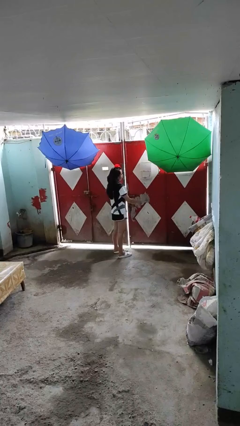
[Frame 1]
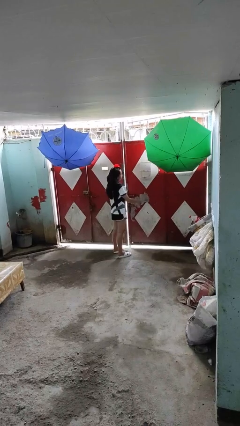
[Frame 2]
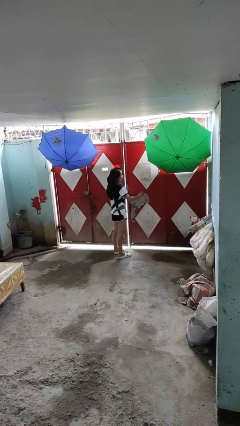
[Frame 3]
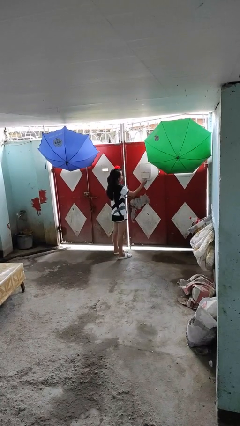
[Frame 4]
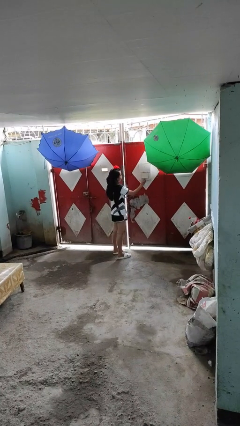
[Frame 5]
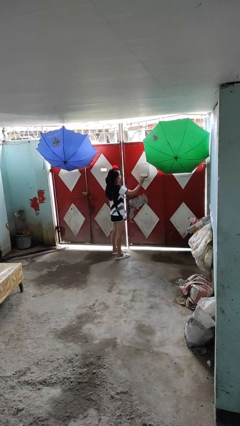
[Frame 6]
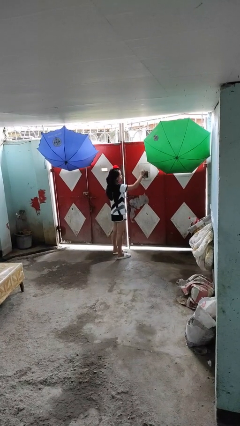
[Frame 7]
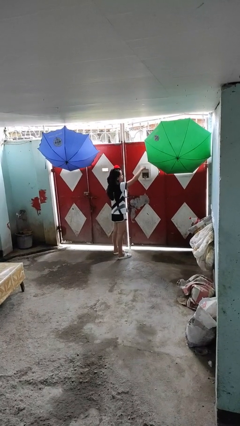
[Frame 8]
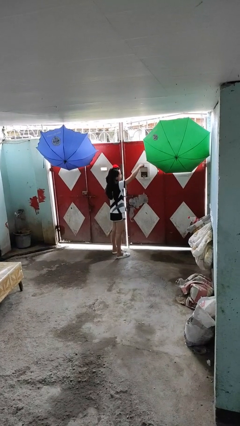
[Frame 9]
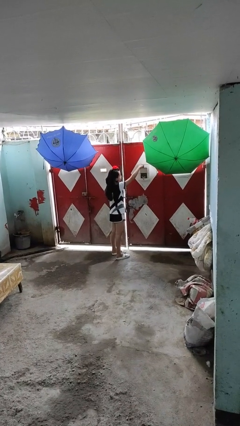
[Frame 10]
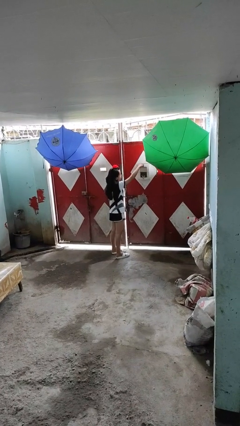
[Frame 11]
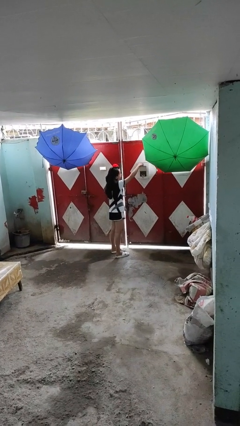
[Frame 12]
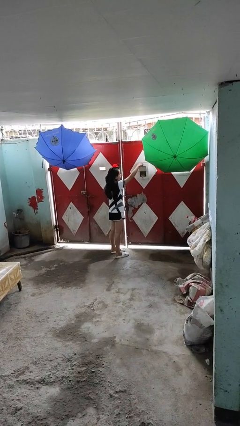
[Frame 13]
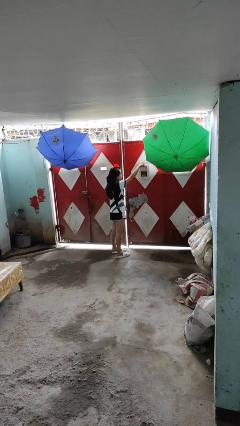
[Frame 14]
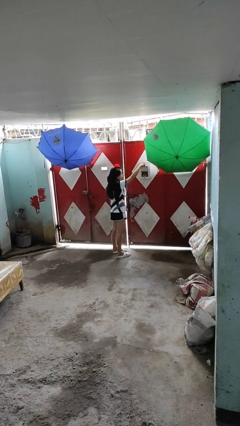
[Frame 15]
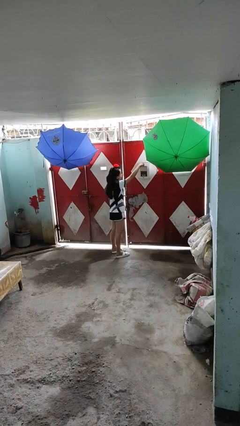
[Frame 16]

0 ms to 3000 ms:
person opens mailbox

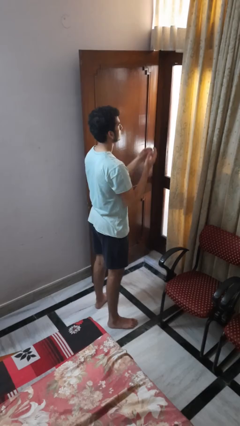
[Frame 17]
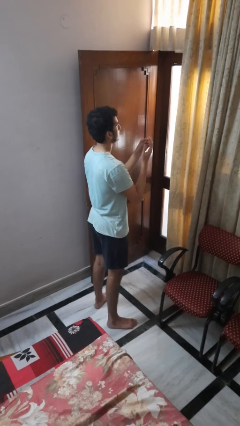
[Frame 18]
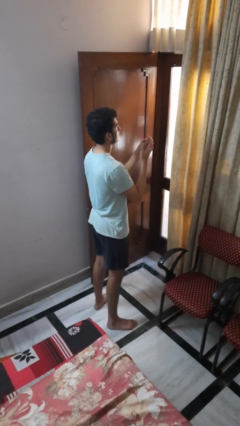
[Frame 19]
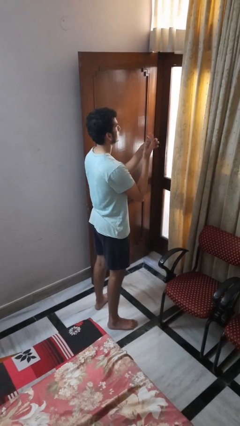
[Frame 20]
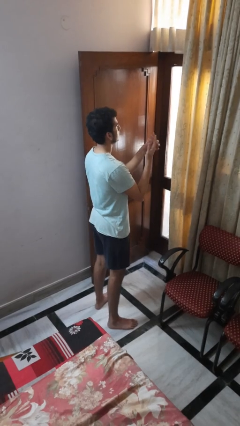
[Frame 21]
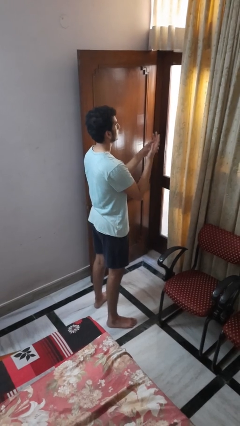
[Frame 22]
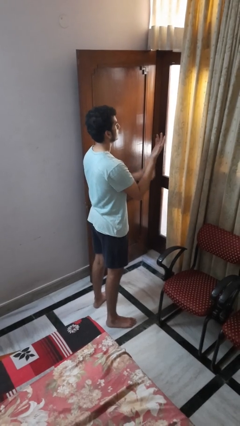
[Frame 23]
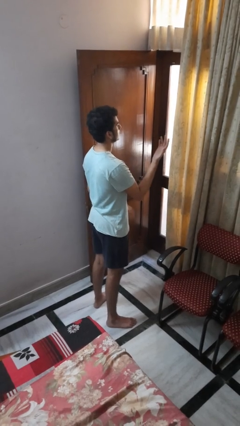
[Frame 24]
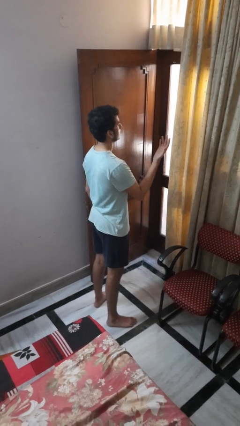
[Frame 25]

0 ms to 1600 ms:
person puts on ring

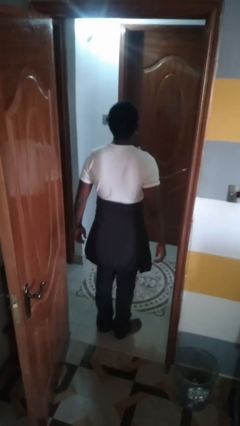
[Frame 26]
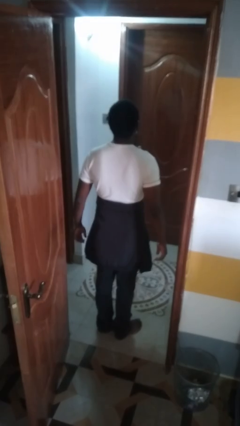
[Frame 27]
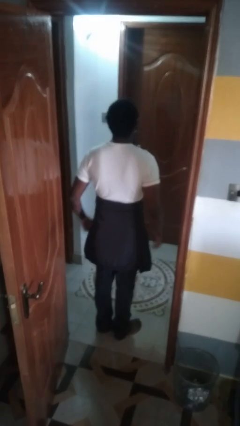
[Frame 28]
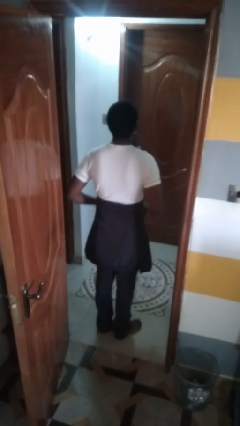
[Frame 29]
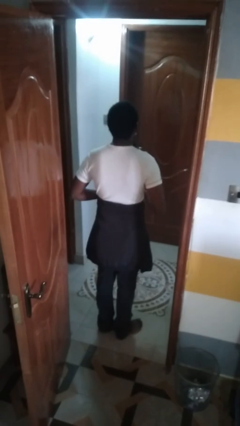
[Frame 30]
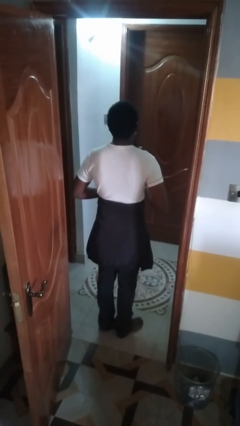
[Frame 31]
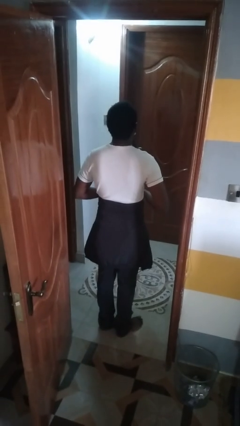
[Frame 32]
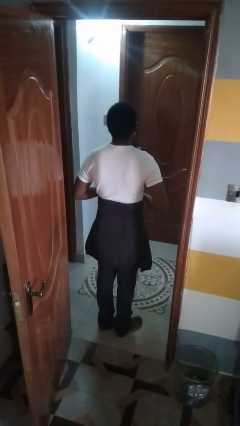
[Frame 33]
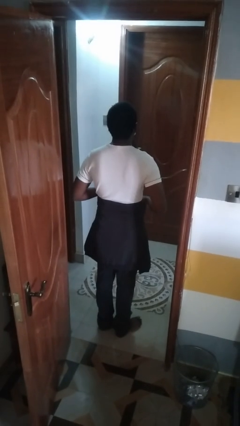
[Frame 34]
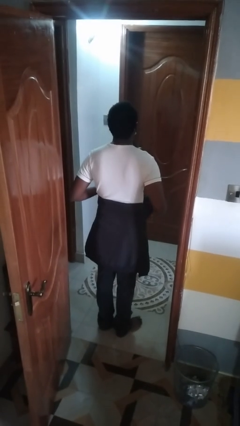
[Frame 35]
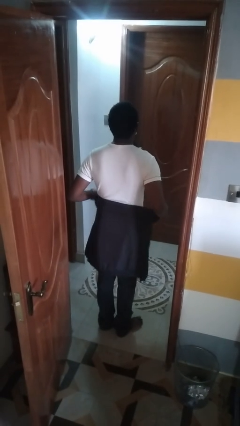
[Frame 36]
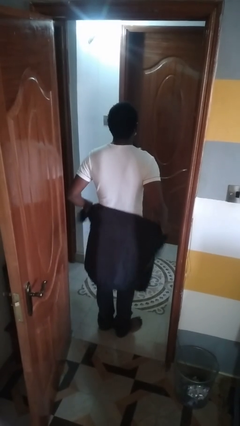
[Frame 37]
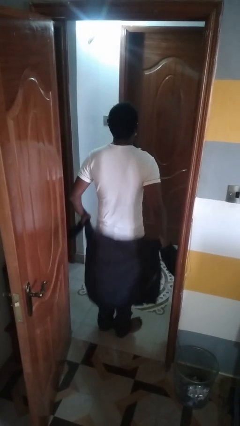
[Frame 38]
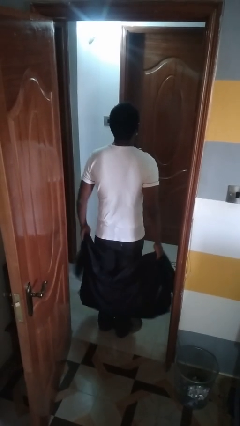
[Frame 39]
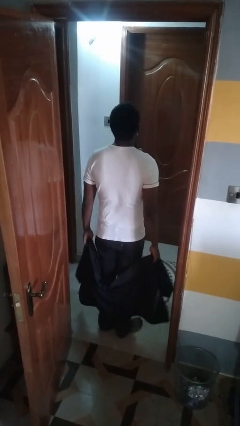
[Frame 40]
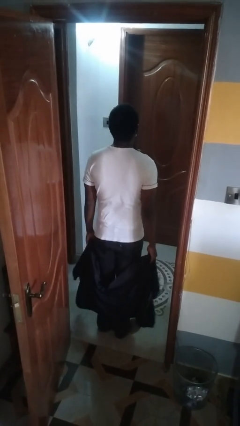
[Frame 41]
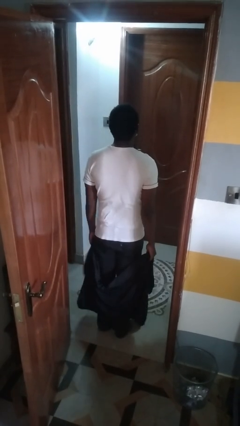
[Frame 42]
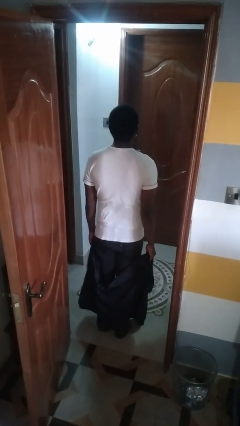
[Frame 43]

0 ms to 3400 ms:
person unties jacket around waist

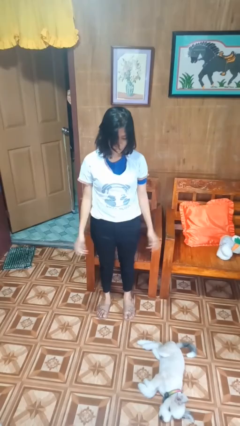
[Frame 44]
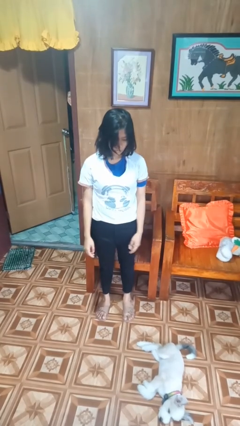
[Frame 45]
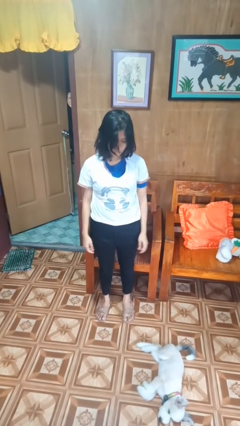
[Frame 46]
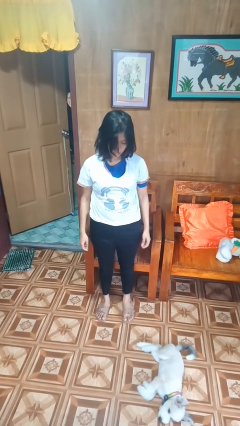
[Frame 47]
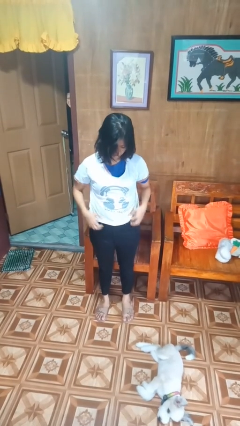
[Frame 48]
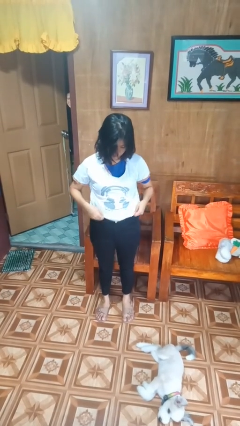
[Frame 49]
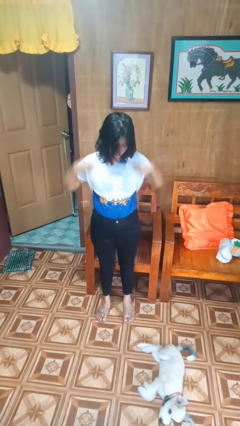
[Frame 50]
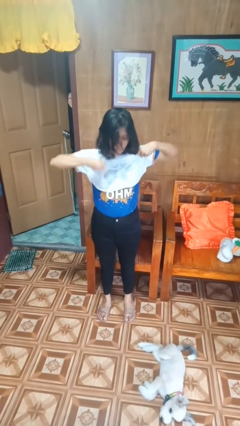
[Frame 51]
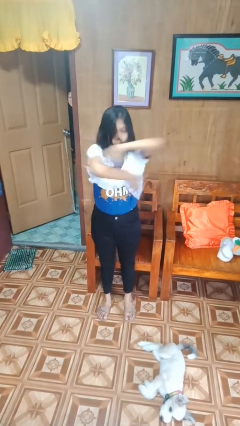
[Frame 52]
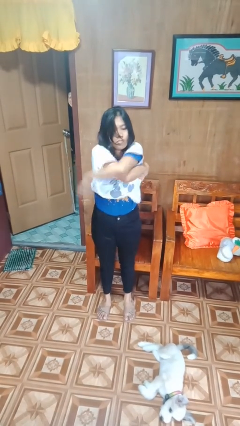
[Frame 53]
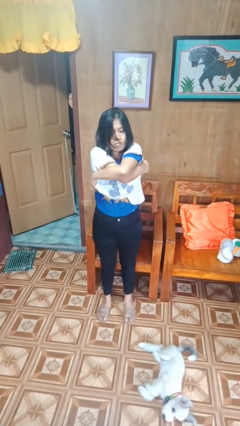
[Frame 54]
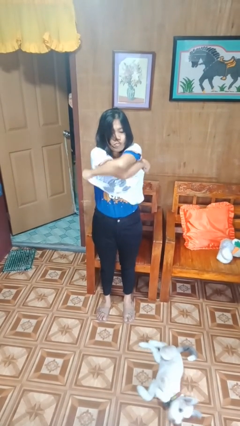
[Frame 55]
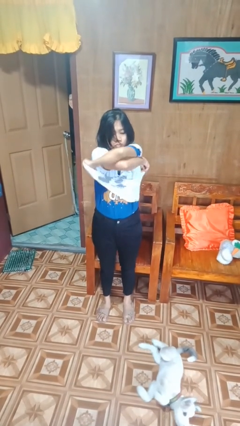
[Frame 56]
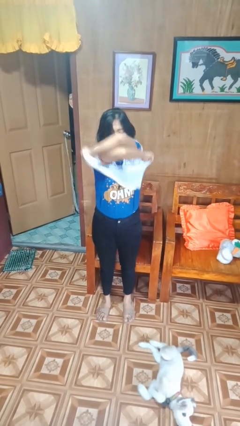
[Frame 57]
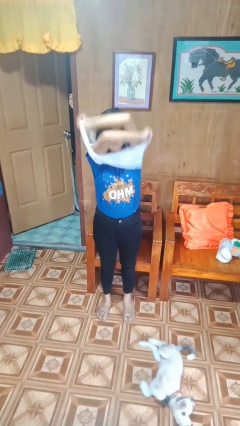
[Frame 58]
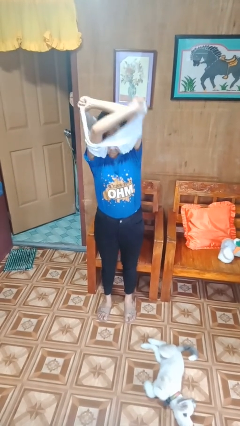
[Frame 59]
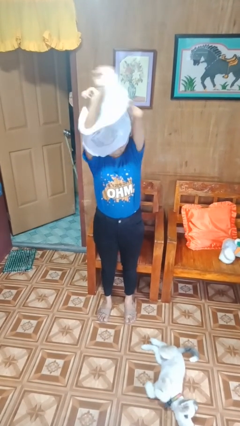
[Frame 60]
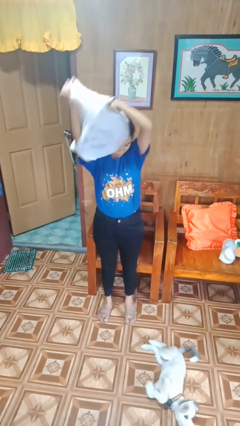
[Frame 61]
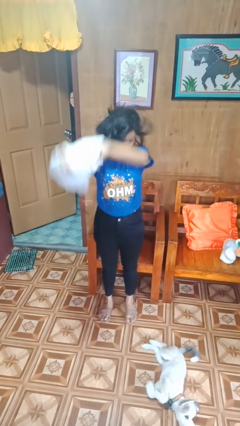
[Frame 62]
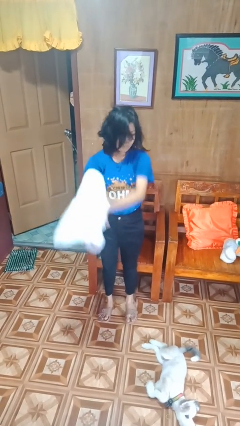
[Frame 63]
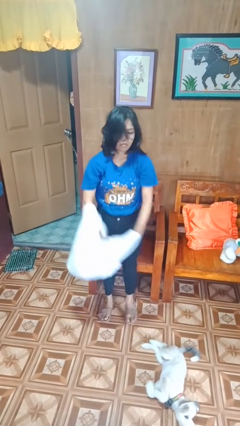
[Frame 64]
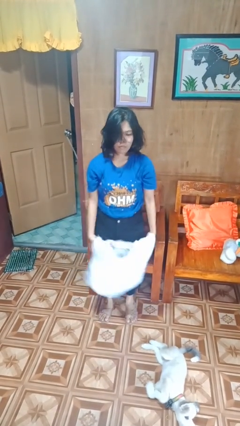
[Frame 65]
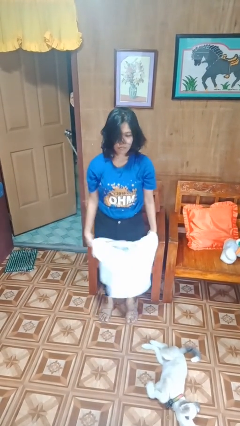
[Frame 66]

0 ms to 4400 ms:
person takes off shirt

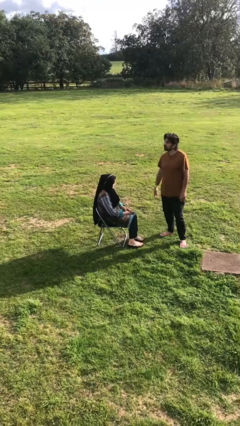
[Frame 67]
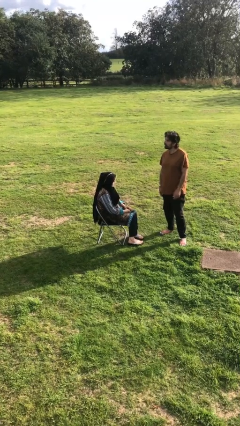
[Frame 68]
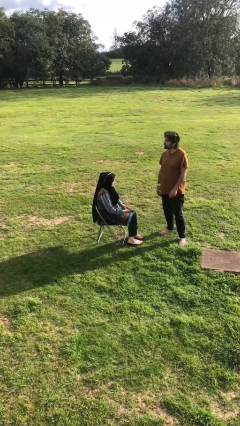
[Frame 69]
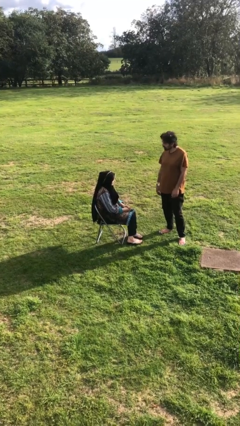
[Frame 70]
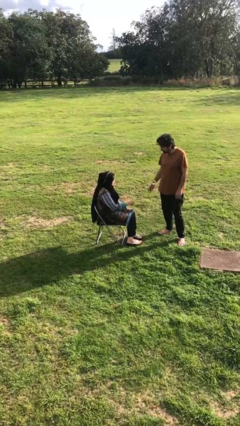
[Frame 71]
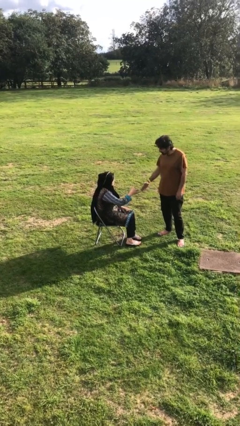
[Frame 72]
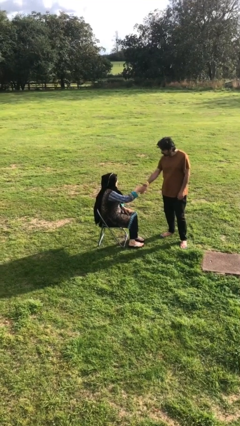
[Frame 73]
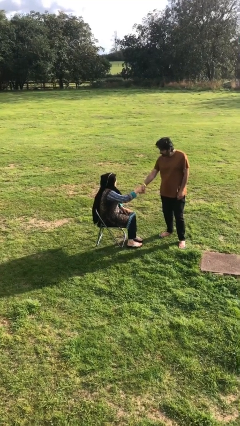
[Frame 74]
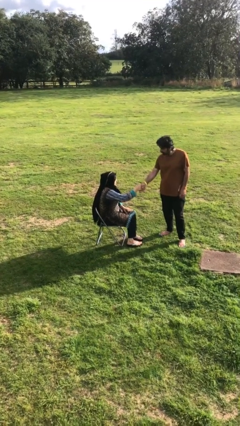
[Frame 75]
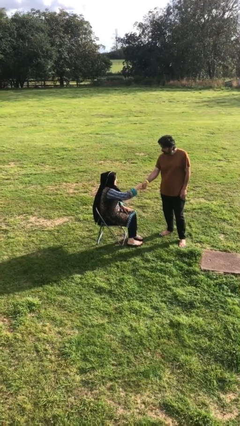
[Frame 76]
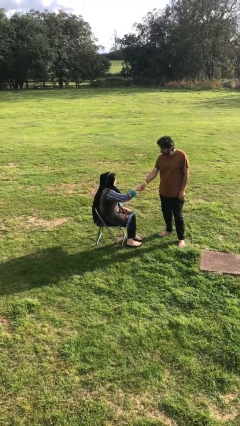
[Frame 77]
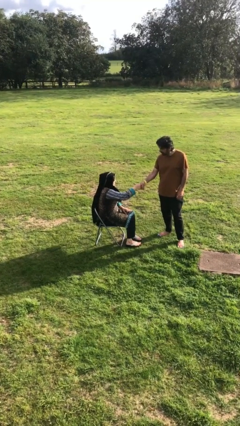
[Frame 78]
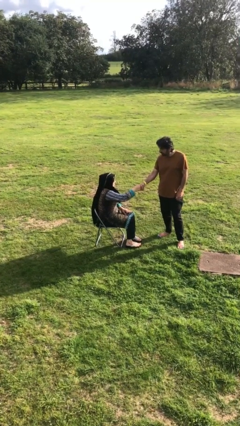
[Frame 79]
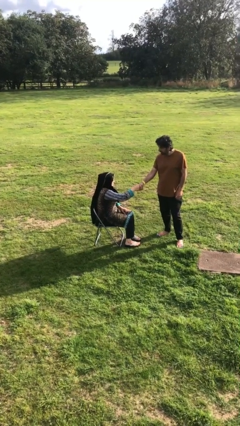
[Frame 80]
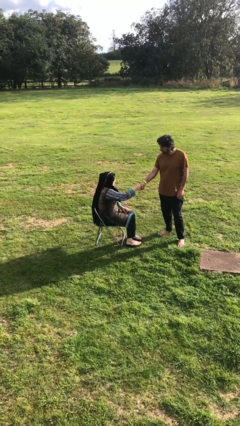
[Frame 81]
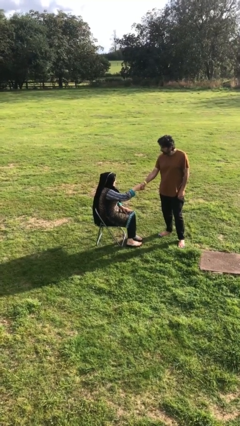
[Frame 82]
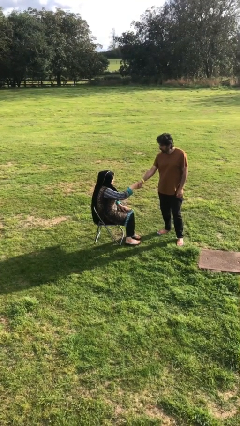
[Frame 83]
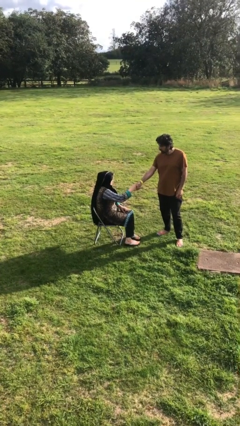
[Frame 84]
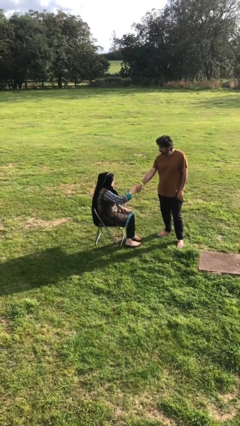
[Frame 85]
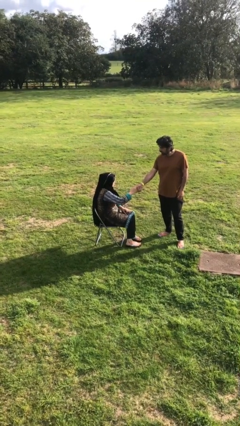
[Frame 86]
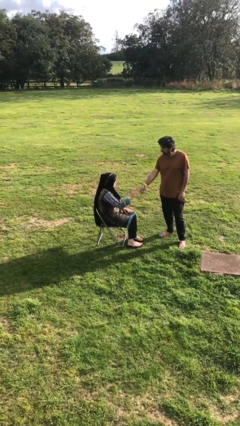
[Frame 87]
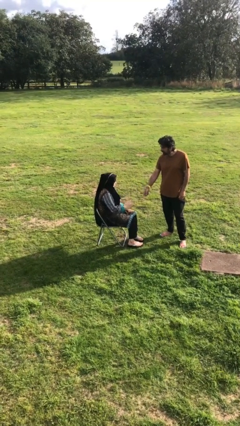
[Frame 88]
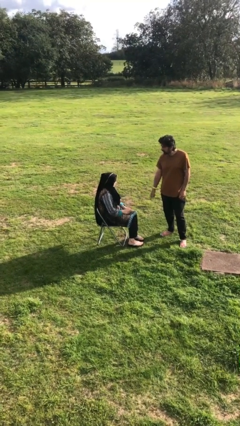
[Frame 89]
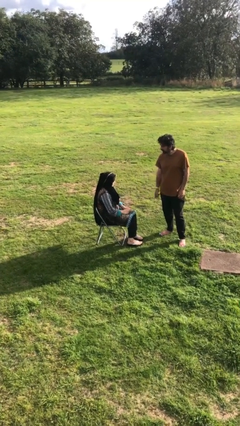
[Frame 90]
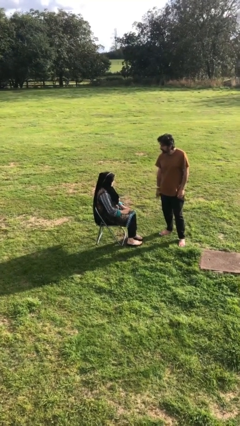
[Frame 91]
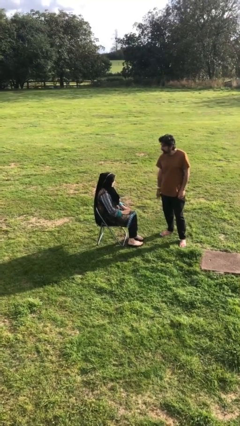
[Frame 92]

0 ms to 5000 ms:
person shakes hand
